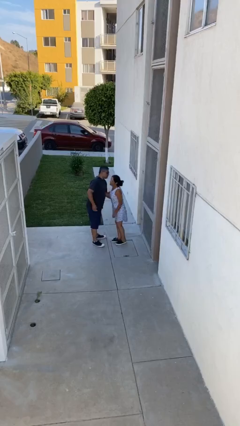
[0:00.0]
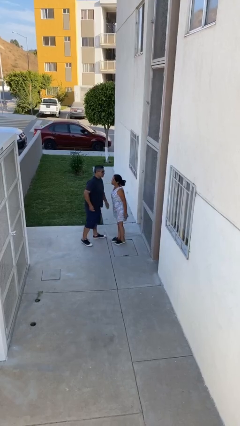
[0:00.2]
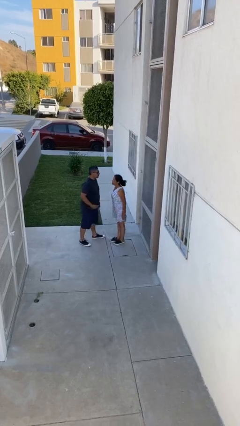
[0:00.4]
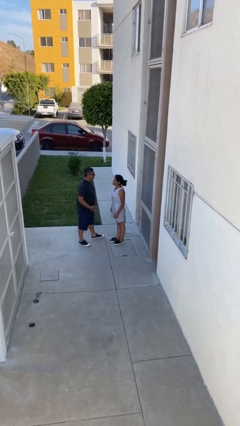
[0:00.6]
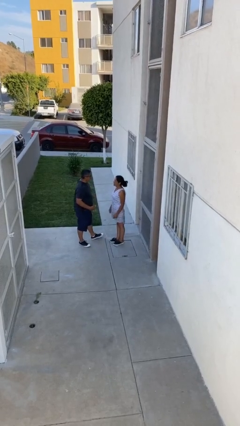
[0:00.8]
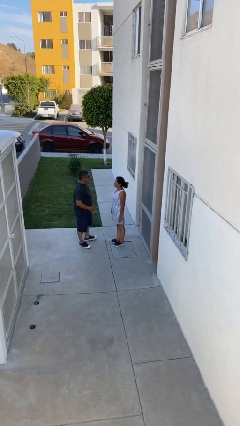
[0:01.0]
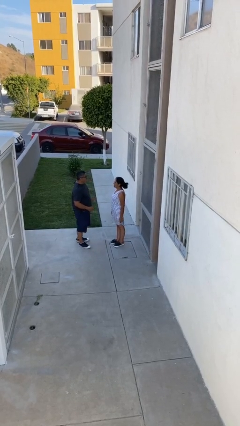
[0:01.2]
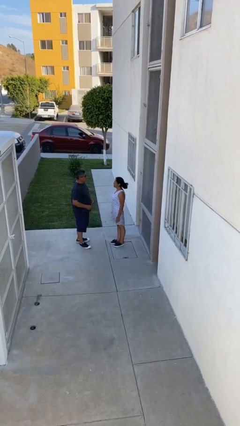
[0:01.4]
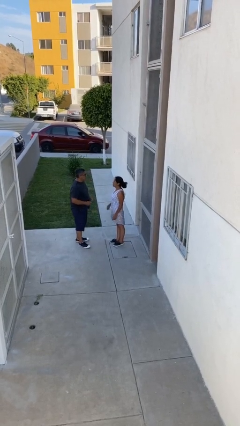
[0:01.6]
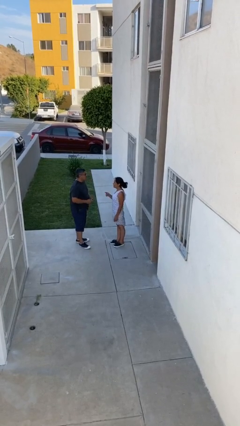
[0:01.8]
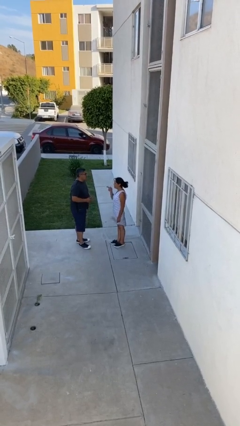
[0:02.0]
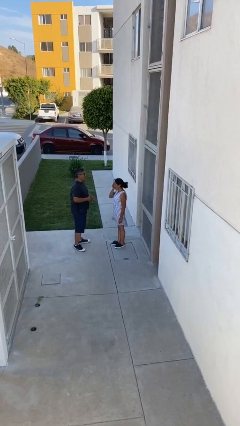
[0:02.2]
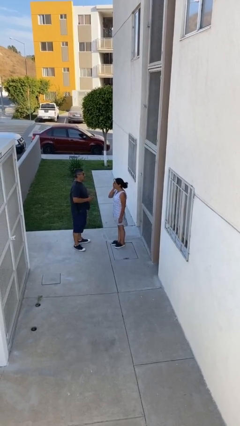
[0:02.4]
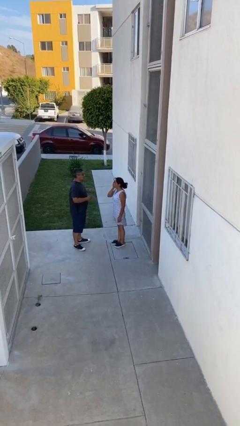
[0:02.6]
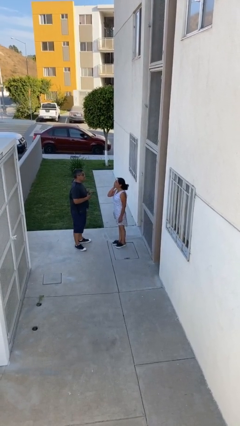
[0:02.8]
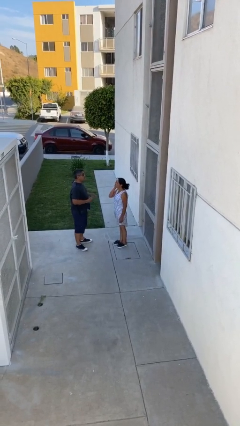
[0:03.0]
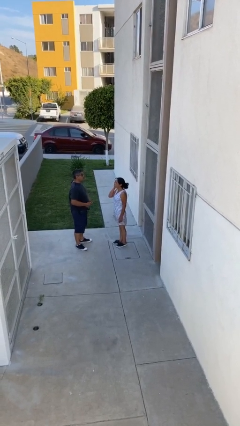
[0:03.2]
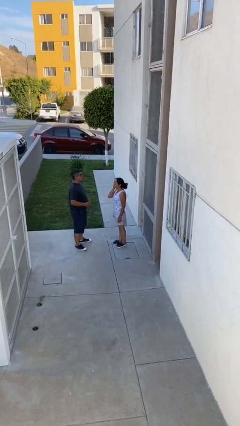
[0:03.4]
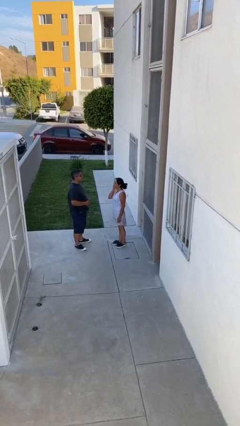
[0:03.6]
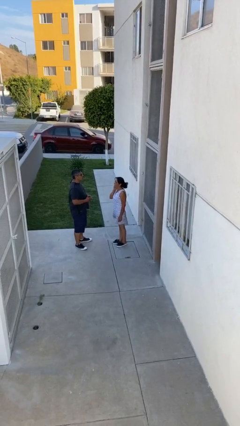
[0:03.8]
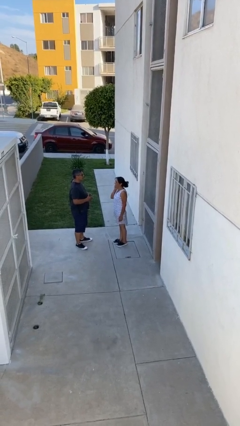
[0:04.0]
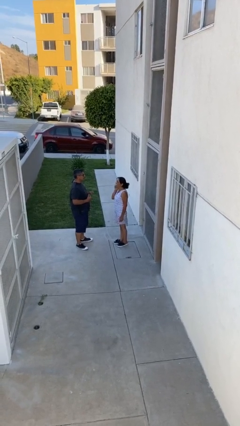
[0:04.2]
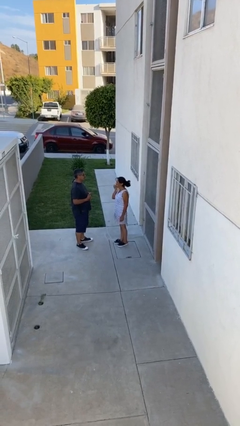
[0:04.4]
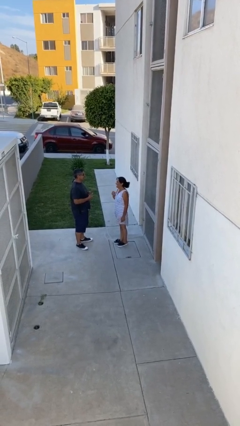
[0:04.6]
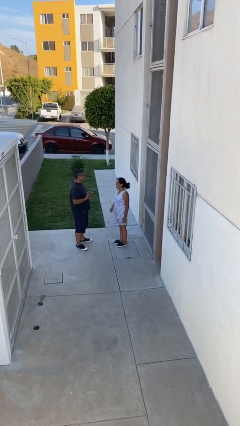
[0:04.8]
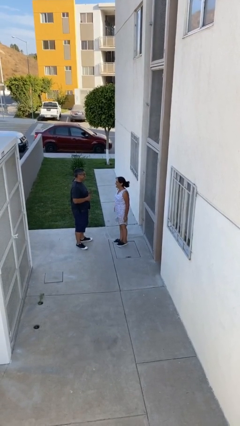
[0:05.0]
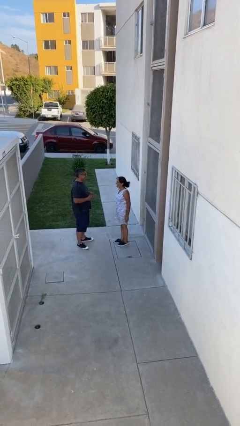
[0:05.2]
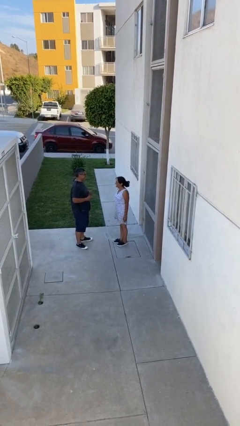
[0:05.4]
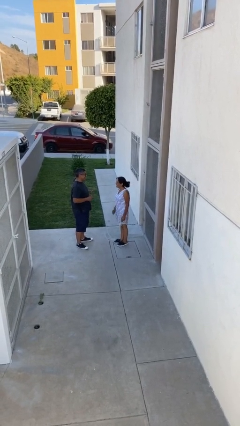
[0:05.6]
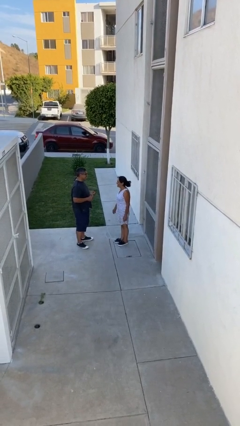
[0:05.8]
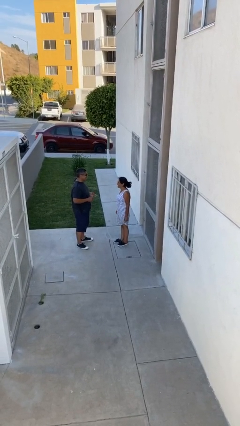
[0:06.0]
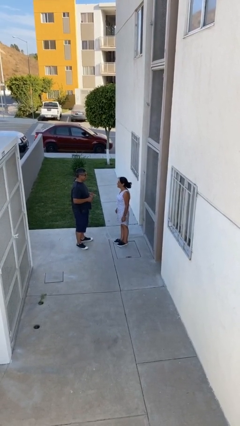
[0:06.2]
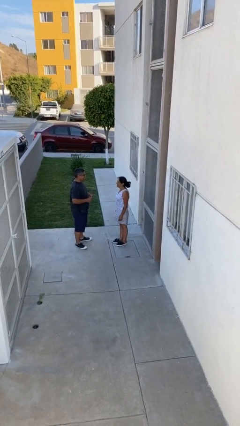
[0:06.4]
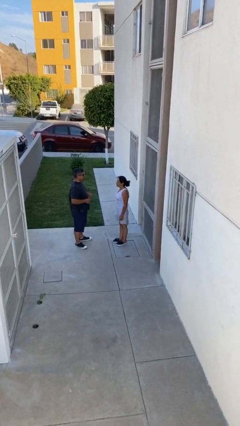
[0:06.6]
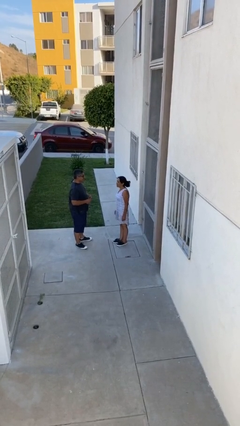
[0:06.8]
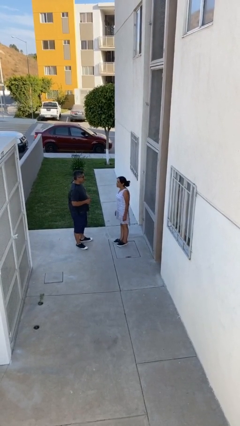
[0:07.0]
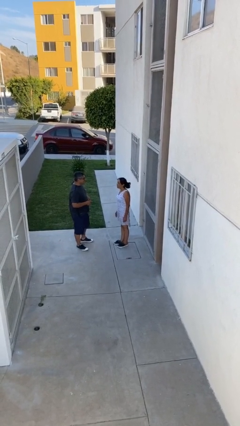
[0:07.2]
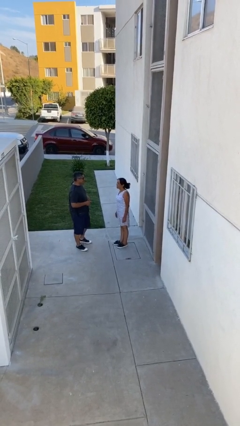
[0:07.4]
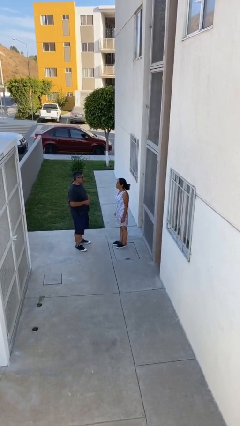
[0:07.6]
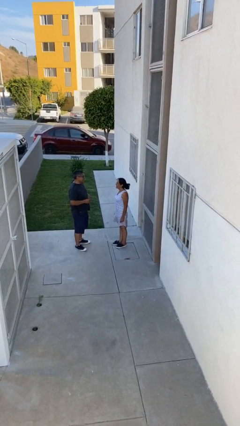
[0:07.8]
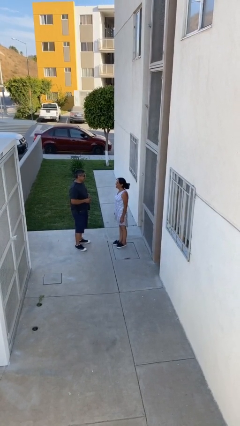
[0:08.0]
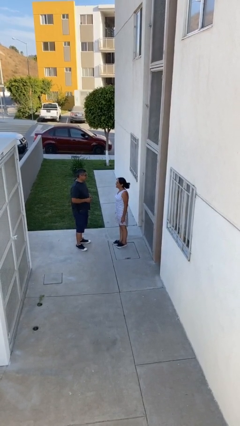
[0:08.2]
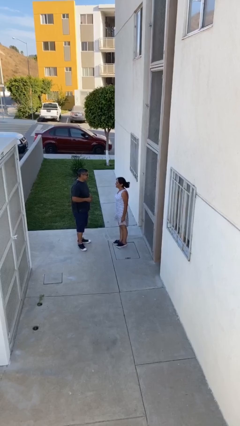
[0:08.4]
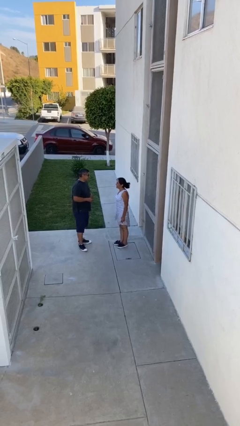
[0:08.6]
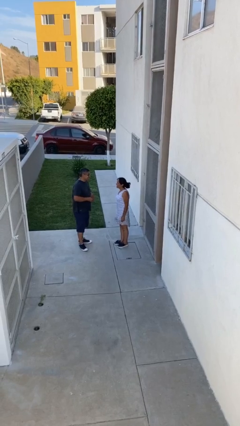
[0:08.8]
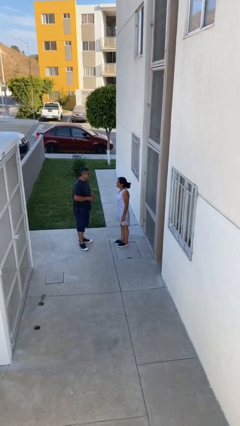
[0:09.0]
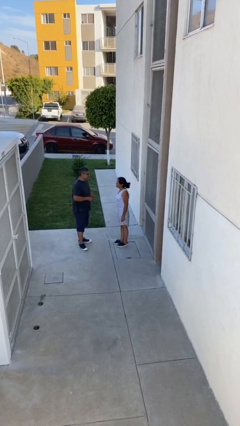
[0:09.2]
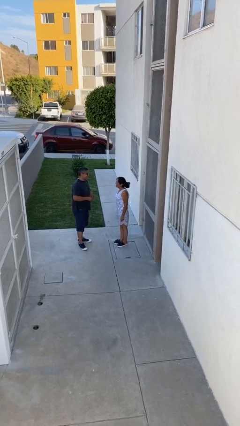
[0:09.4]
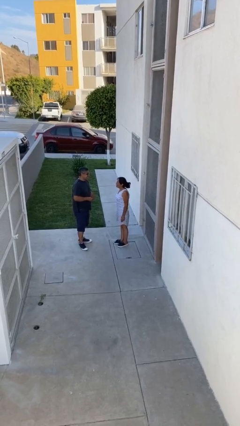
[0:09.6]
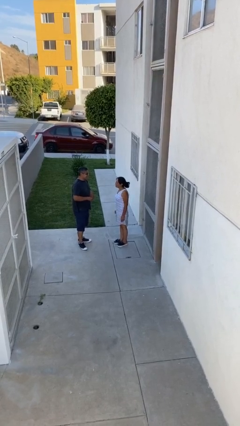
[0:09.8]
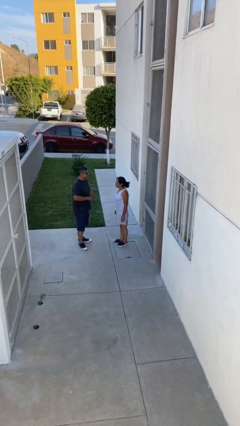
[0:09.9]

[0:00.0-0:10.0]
person talks to person

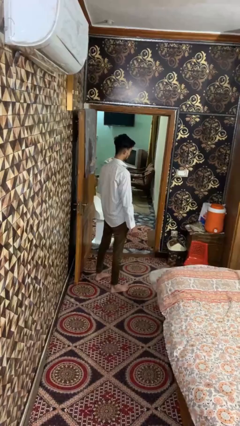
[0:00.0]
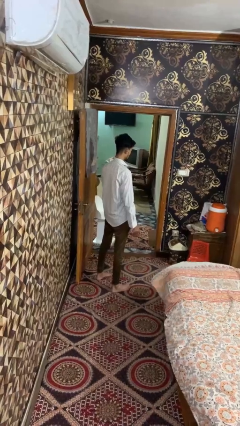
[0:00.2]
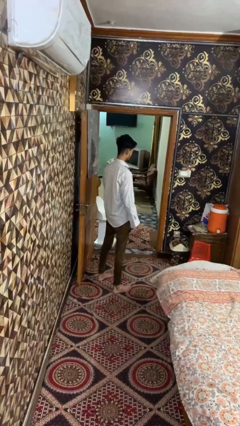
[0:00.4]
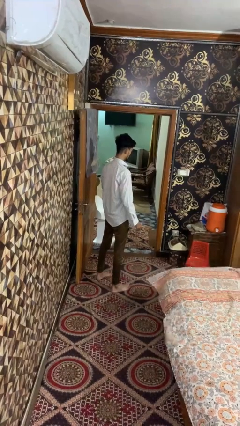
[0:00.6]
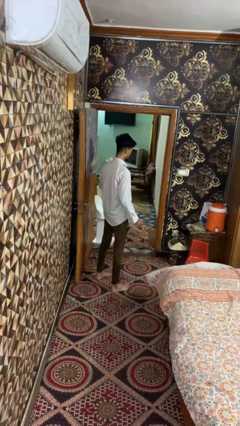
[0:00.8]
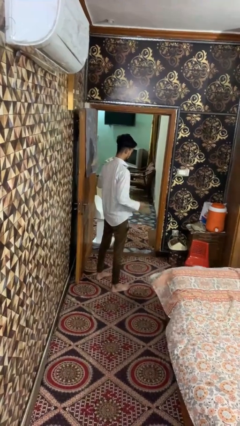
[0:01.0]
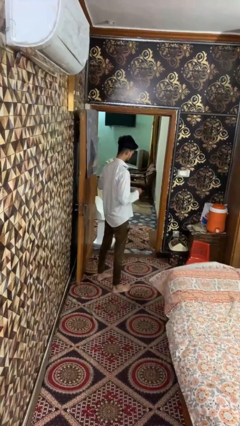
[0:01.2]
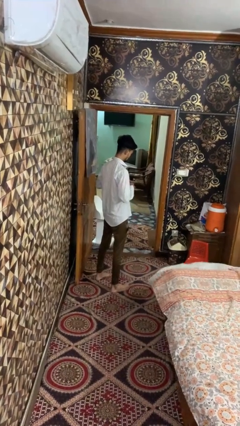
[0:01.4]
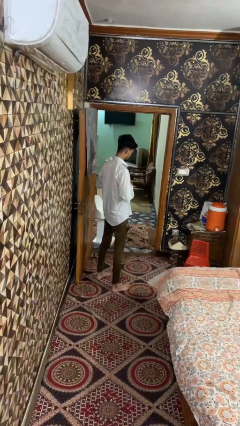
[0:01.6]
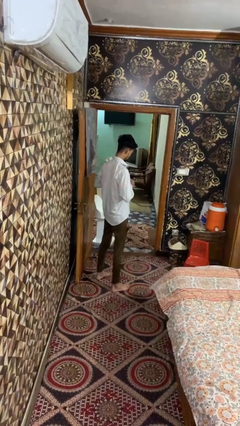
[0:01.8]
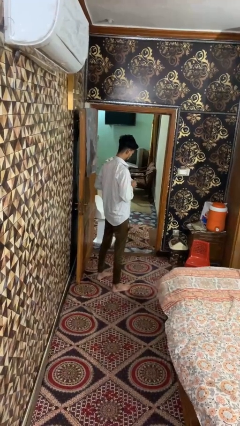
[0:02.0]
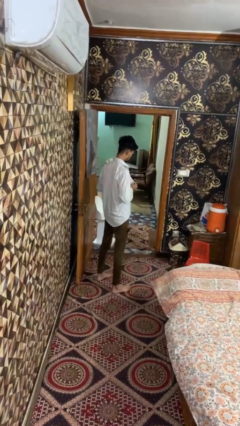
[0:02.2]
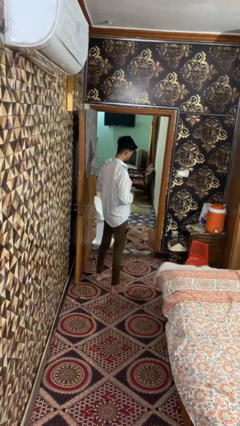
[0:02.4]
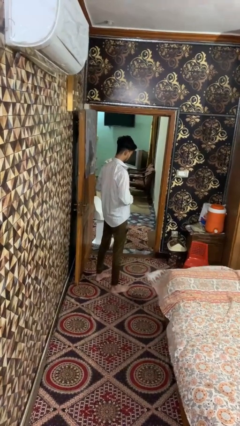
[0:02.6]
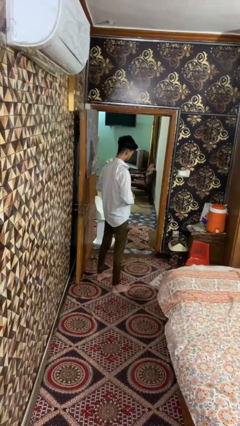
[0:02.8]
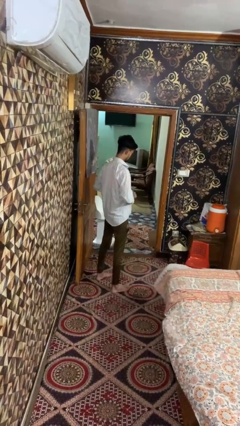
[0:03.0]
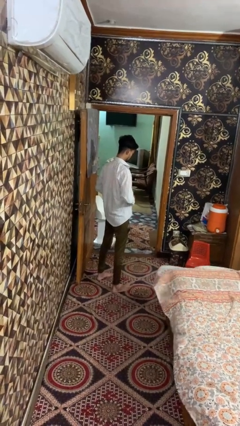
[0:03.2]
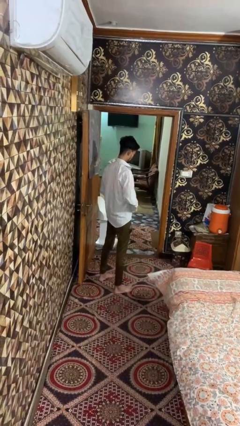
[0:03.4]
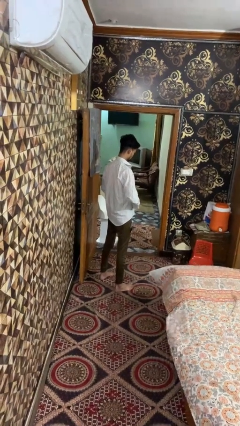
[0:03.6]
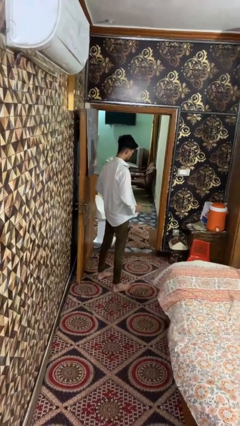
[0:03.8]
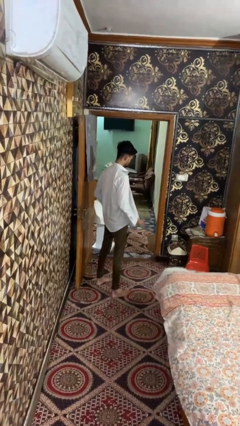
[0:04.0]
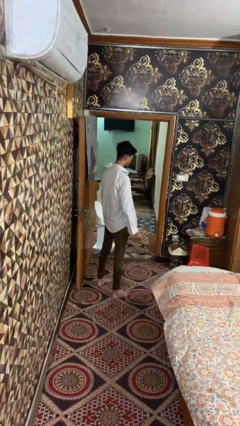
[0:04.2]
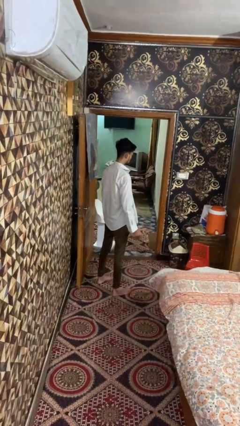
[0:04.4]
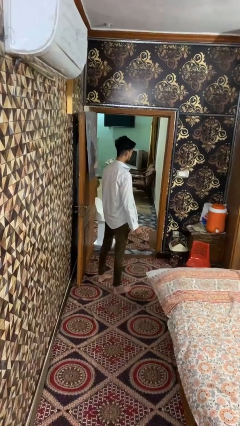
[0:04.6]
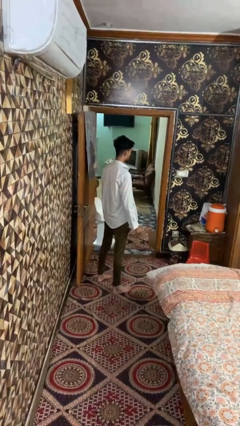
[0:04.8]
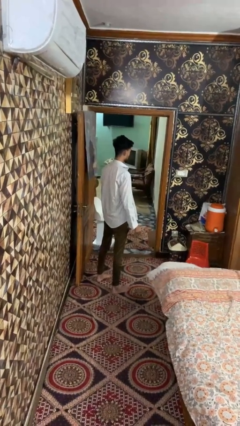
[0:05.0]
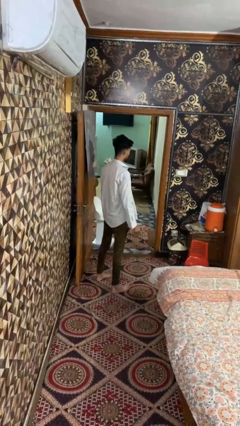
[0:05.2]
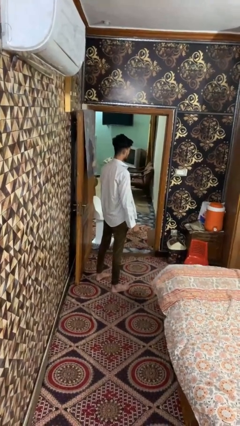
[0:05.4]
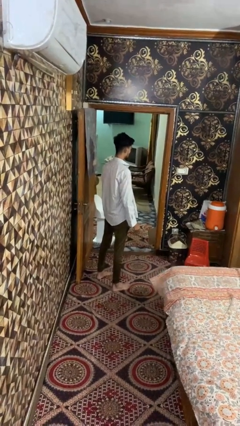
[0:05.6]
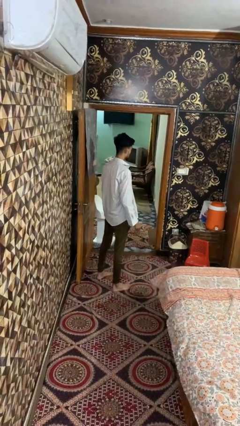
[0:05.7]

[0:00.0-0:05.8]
person unbuttons shirt

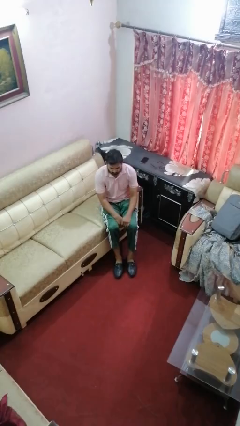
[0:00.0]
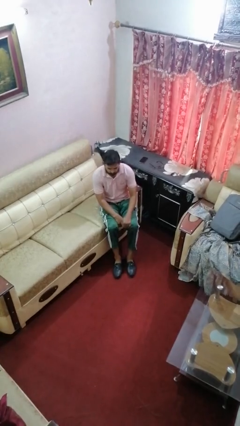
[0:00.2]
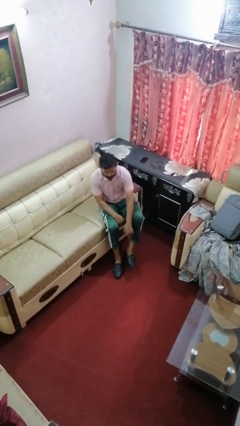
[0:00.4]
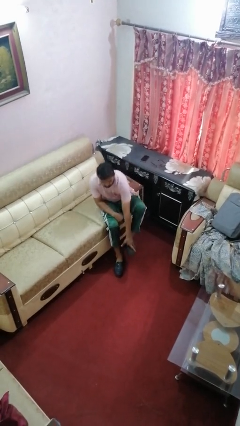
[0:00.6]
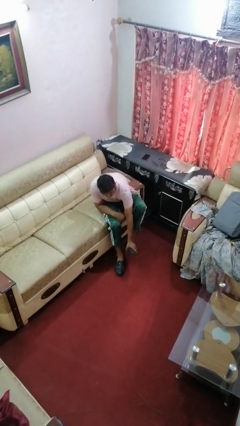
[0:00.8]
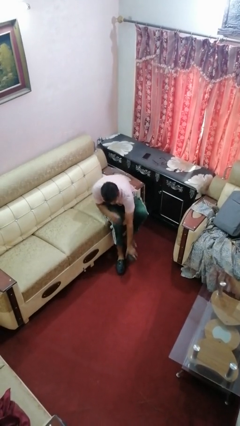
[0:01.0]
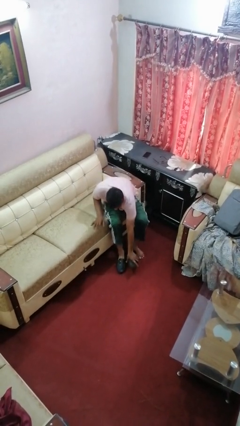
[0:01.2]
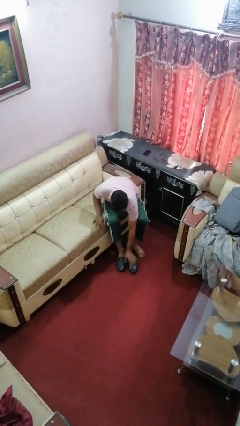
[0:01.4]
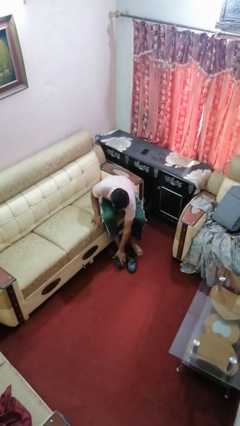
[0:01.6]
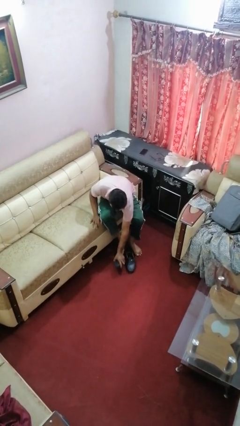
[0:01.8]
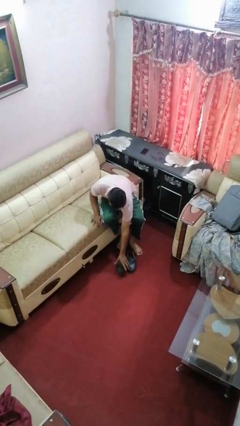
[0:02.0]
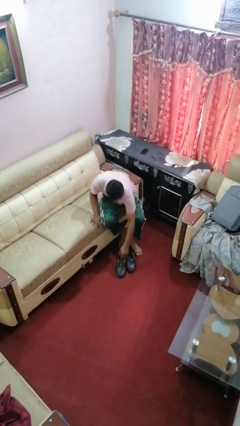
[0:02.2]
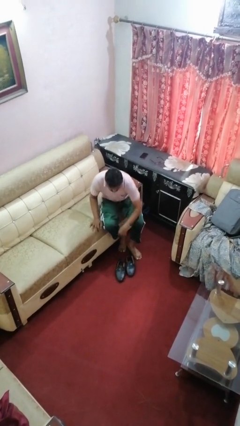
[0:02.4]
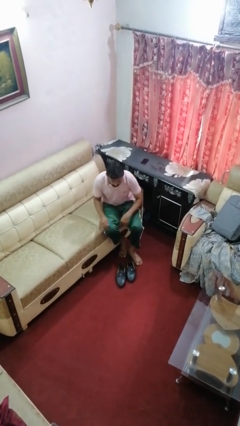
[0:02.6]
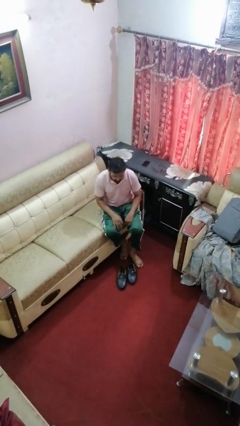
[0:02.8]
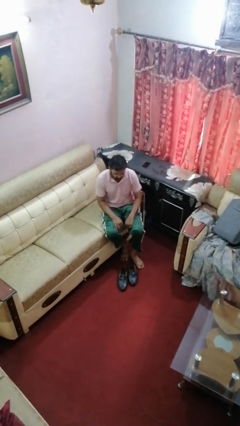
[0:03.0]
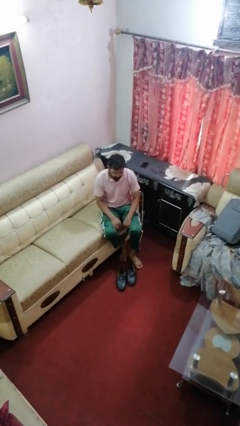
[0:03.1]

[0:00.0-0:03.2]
person takes off shoes
